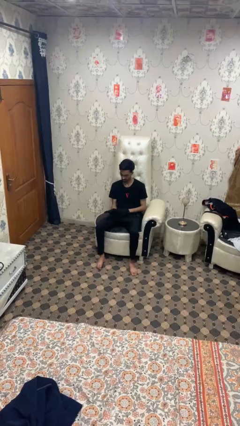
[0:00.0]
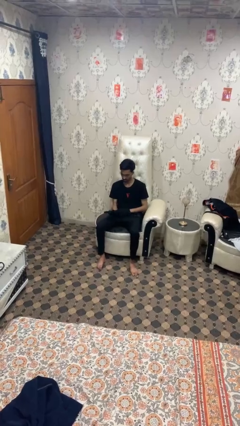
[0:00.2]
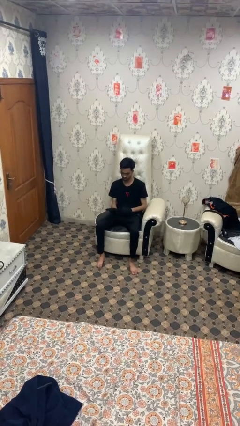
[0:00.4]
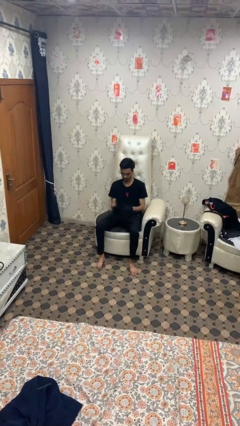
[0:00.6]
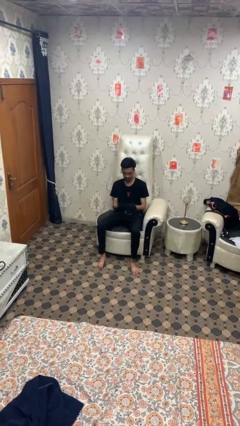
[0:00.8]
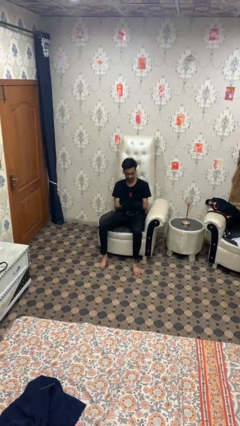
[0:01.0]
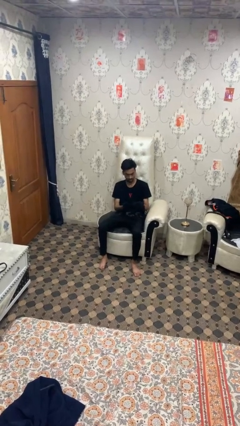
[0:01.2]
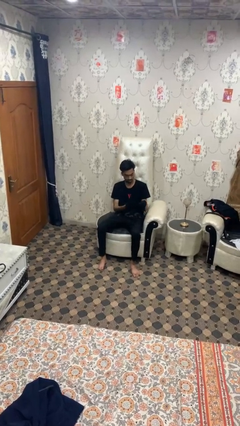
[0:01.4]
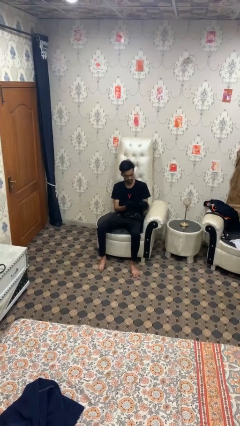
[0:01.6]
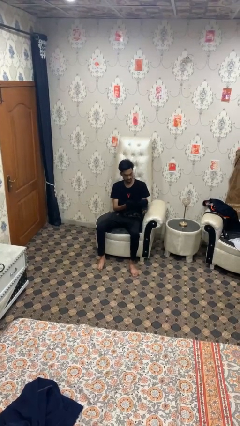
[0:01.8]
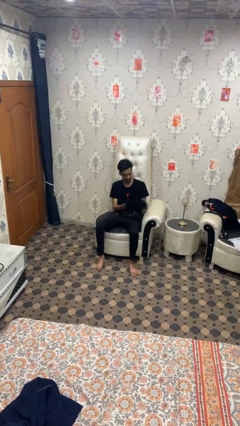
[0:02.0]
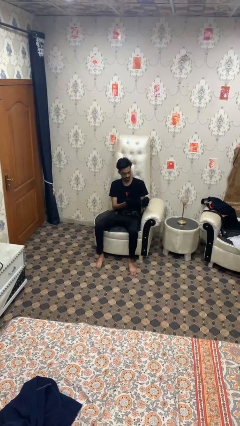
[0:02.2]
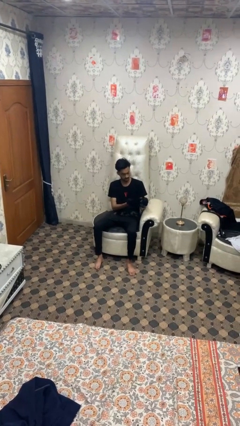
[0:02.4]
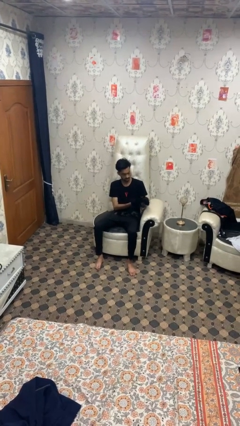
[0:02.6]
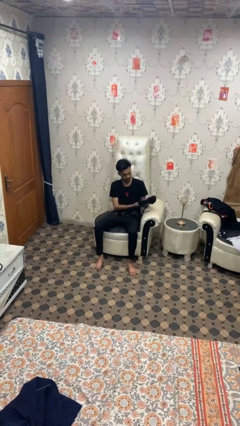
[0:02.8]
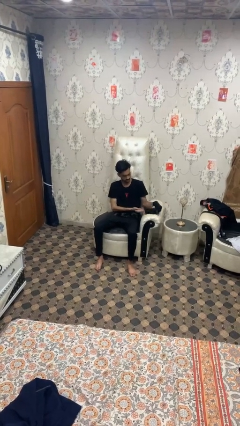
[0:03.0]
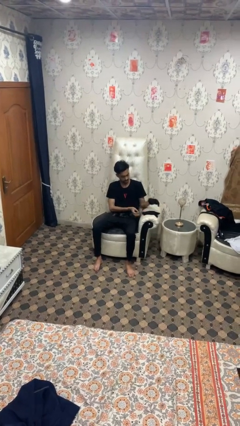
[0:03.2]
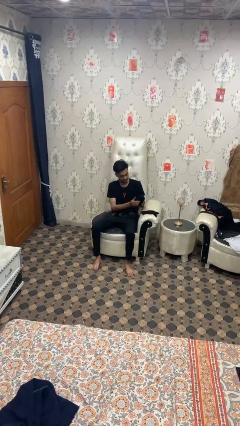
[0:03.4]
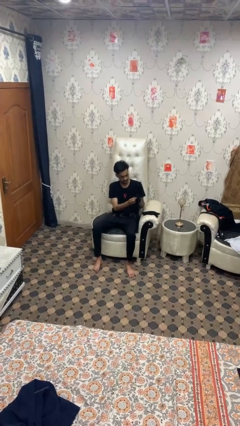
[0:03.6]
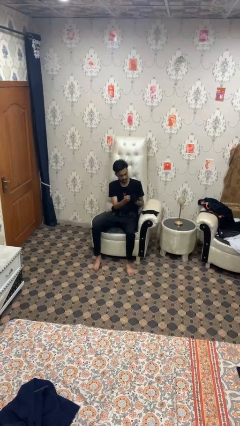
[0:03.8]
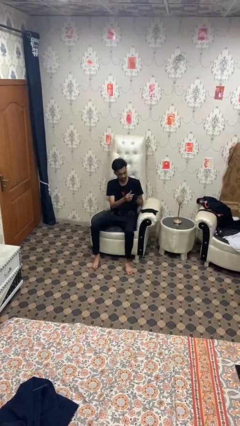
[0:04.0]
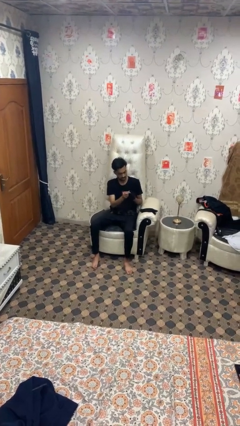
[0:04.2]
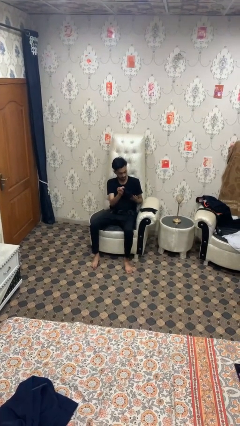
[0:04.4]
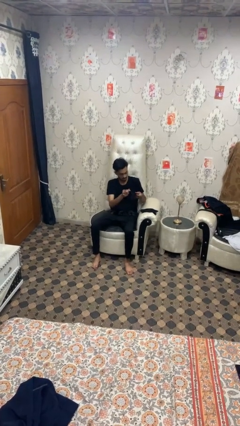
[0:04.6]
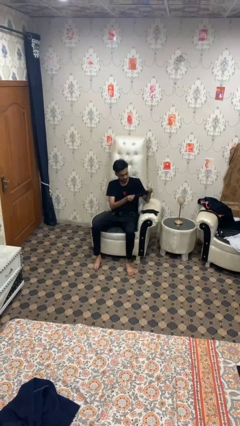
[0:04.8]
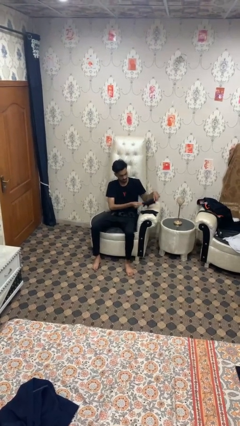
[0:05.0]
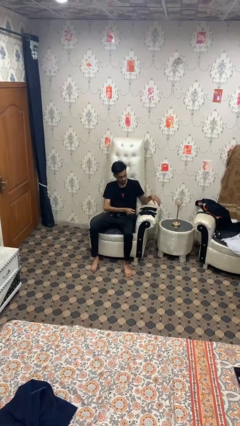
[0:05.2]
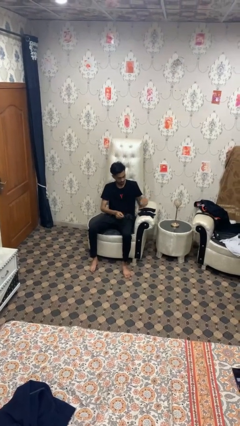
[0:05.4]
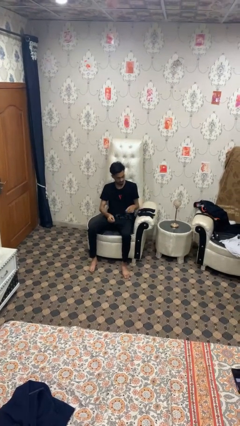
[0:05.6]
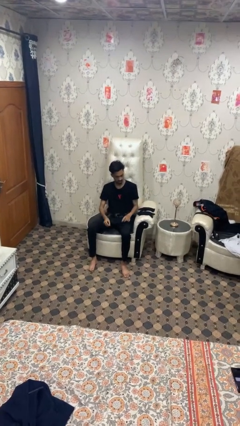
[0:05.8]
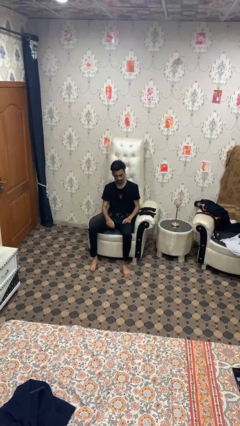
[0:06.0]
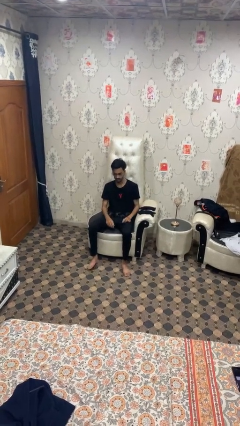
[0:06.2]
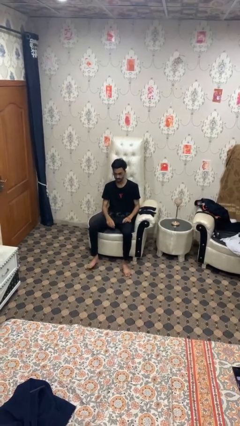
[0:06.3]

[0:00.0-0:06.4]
person takes off gloves

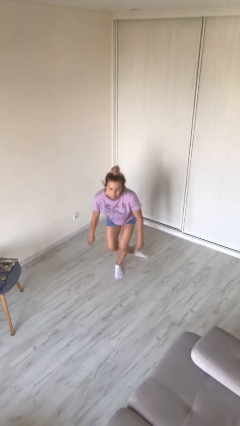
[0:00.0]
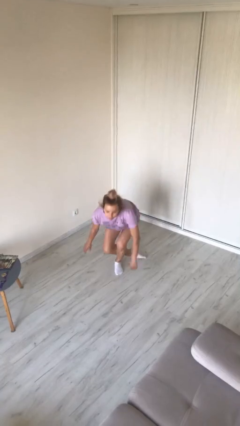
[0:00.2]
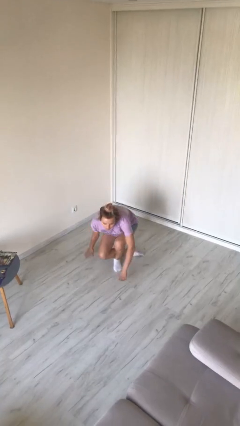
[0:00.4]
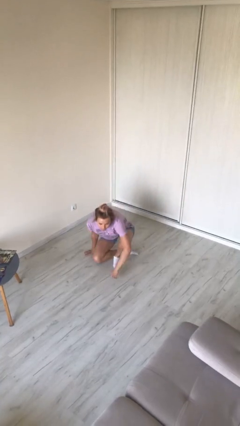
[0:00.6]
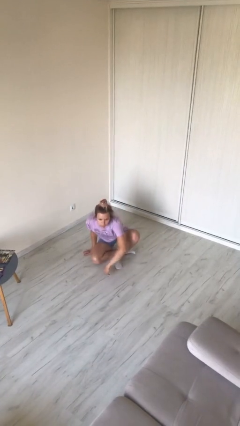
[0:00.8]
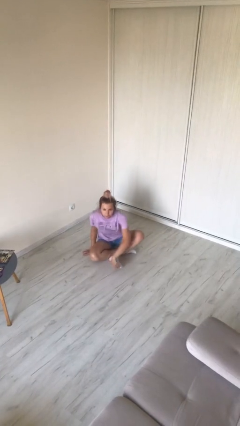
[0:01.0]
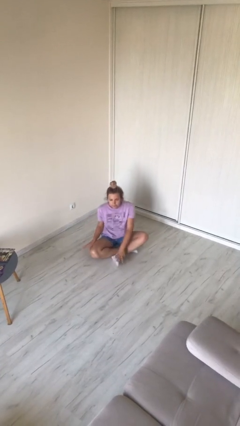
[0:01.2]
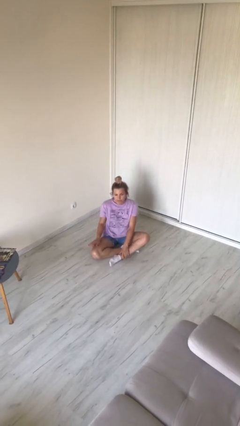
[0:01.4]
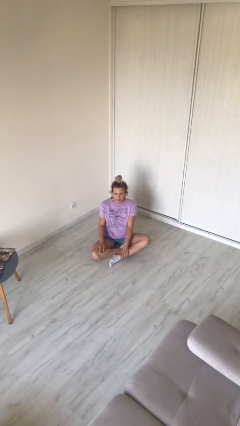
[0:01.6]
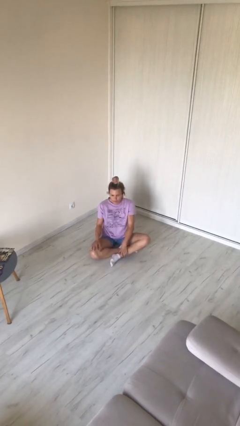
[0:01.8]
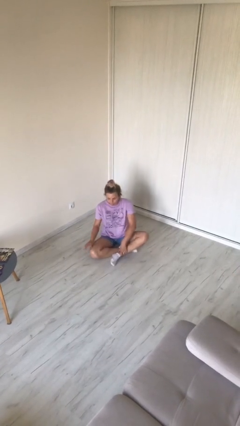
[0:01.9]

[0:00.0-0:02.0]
person sits crisscross

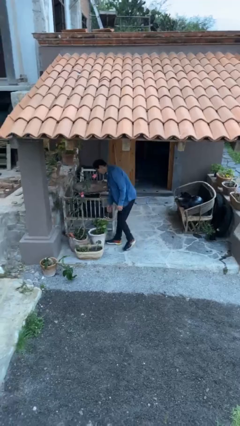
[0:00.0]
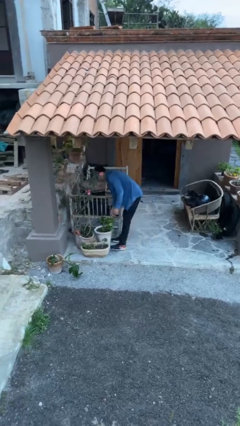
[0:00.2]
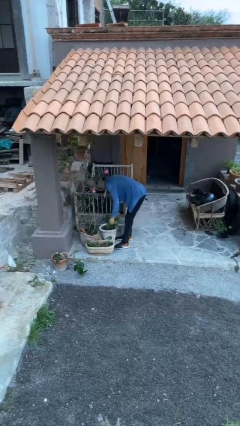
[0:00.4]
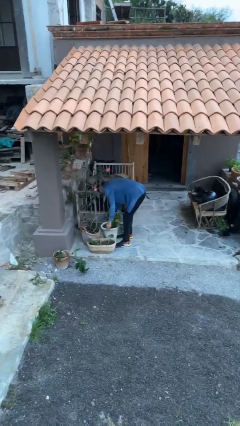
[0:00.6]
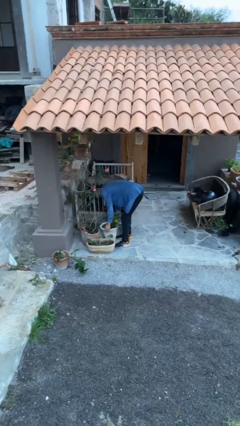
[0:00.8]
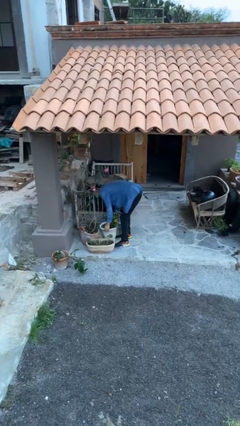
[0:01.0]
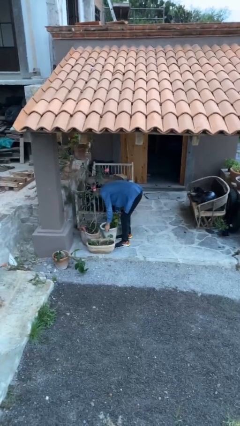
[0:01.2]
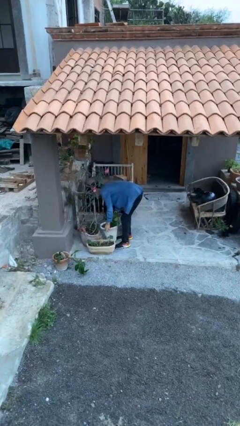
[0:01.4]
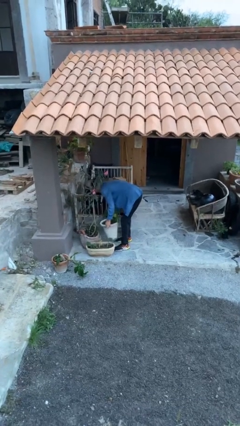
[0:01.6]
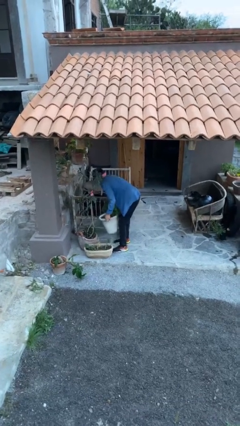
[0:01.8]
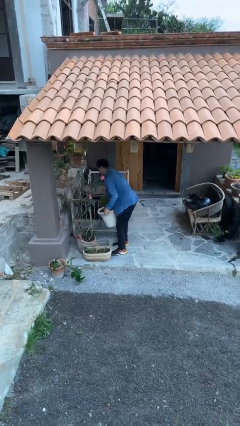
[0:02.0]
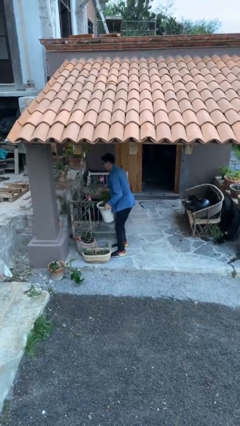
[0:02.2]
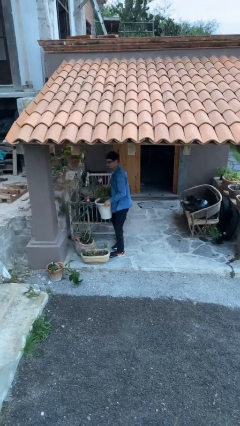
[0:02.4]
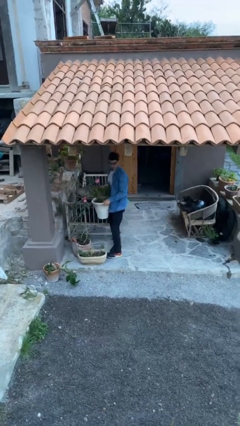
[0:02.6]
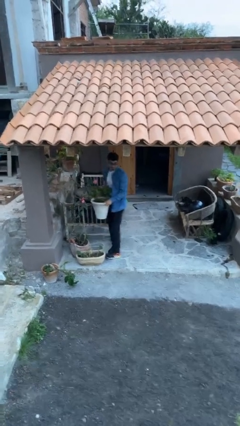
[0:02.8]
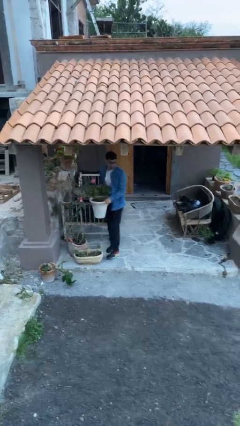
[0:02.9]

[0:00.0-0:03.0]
person picks up object from floor

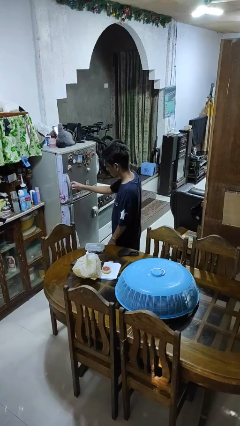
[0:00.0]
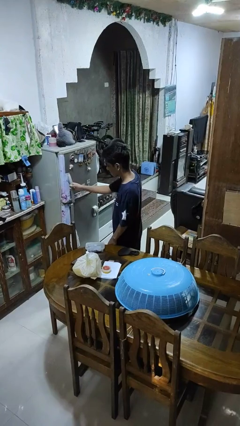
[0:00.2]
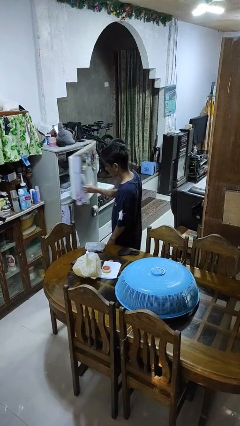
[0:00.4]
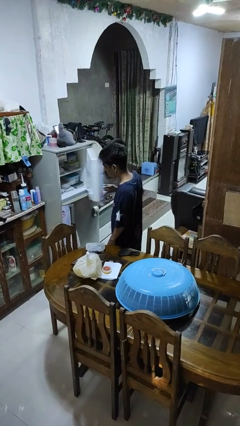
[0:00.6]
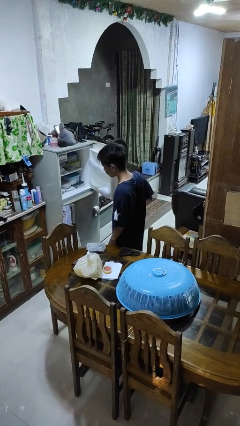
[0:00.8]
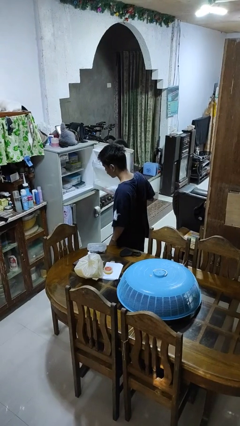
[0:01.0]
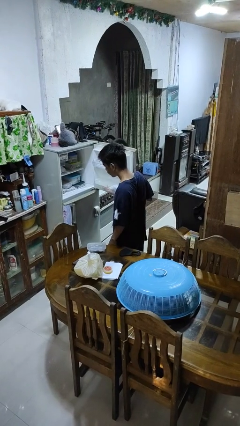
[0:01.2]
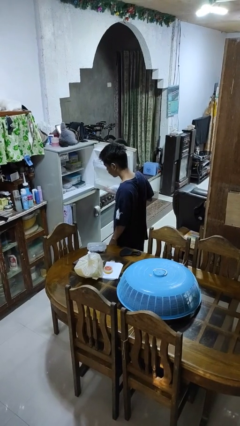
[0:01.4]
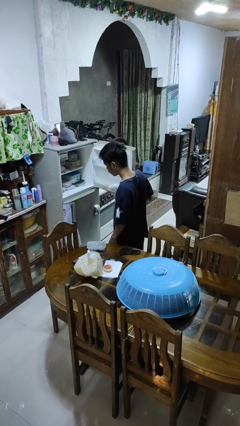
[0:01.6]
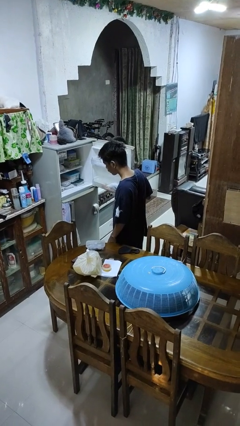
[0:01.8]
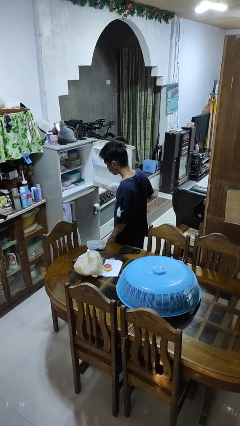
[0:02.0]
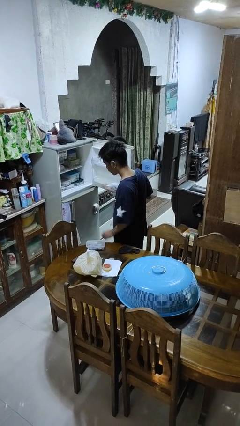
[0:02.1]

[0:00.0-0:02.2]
person opens refrigerator

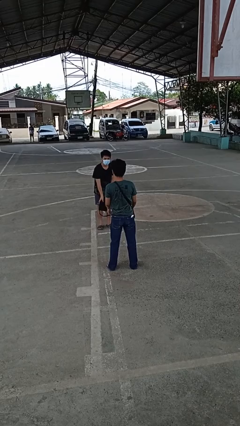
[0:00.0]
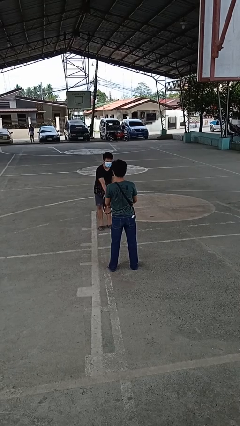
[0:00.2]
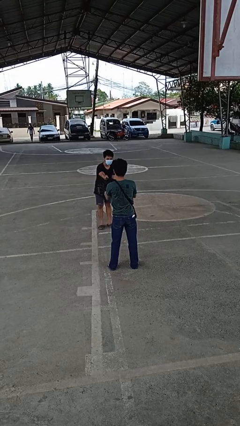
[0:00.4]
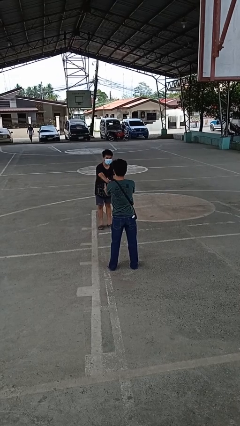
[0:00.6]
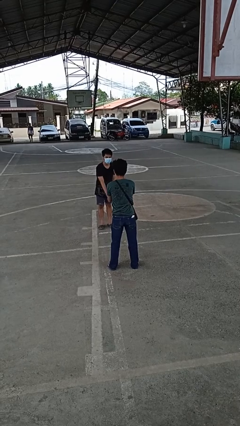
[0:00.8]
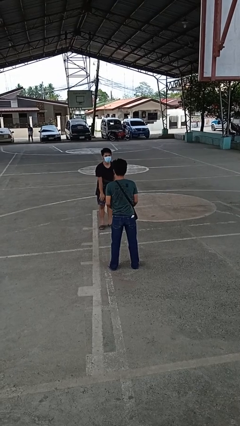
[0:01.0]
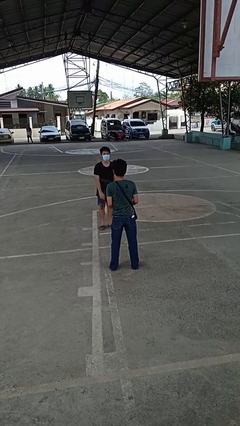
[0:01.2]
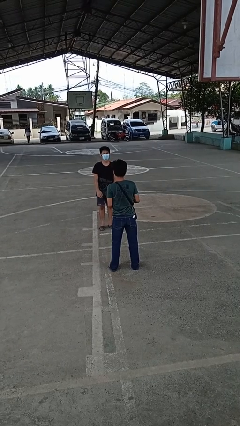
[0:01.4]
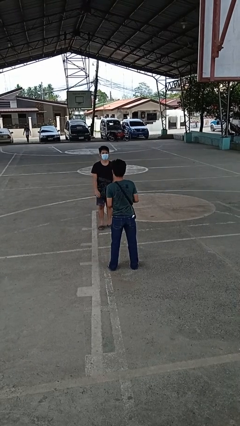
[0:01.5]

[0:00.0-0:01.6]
person catches object from person

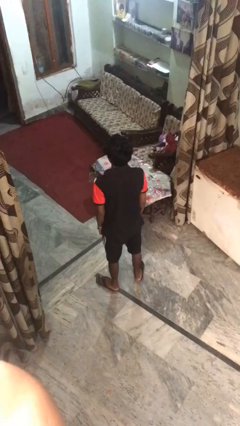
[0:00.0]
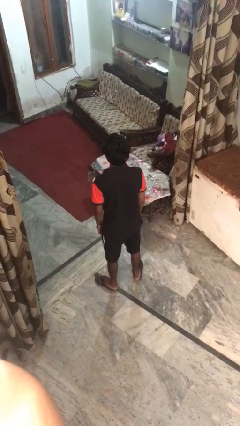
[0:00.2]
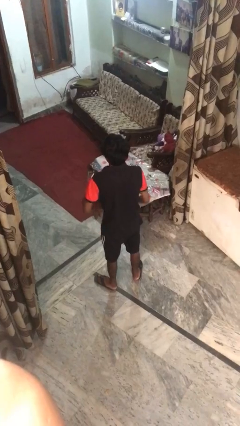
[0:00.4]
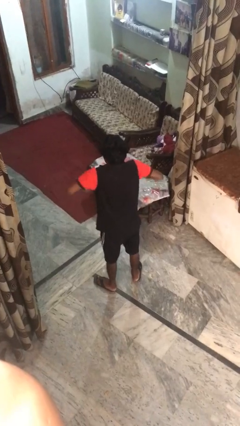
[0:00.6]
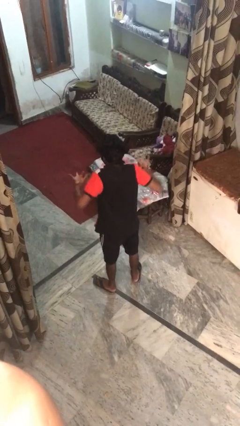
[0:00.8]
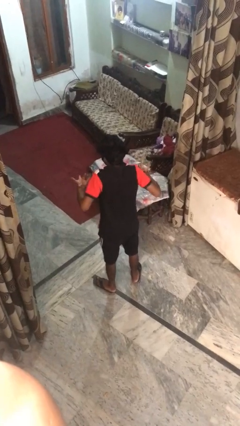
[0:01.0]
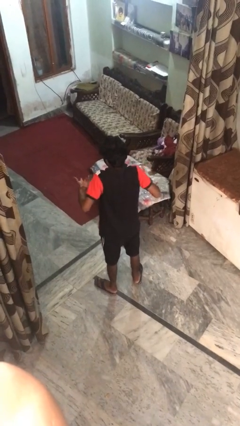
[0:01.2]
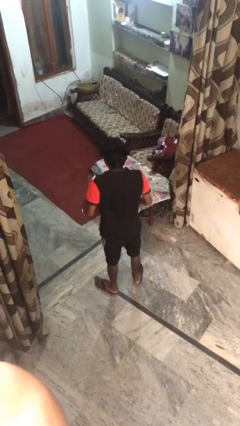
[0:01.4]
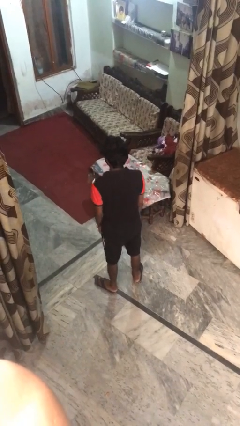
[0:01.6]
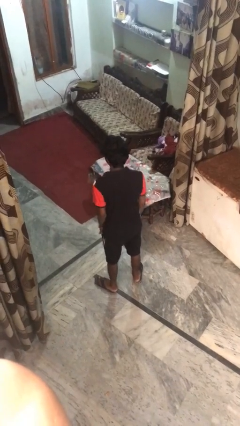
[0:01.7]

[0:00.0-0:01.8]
person shrugs

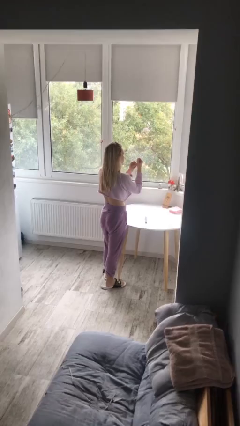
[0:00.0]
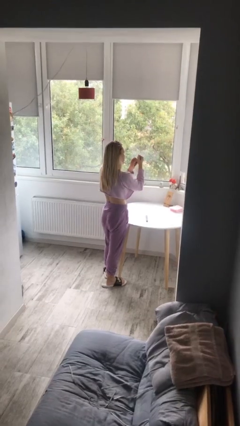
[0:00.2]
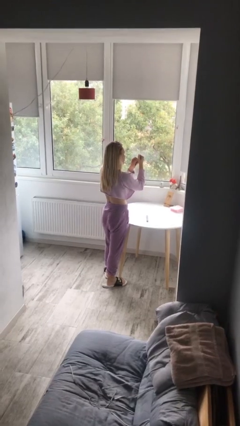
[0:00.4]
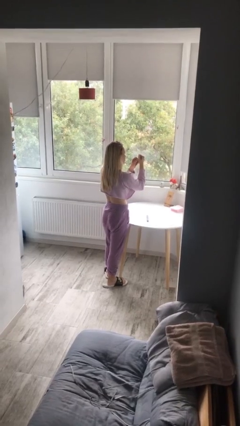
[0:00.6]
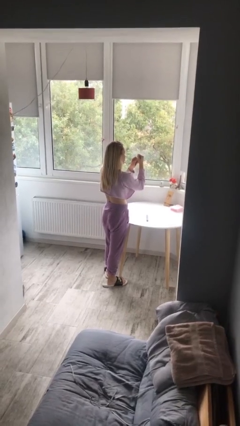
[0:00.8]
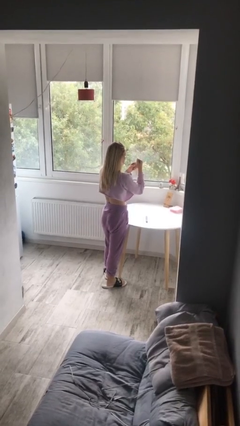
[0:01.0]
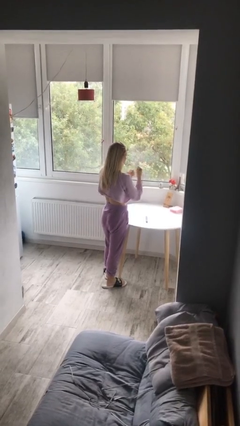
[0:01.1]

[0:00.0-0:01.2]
person clips fingernails
